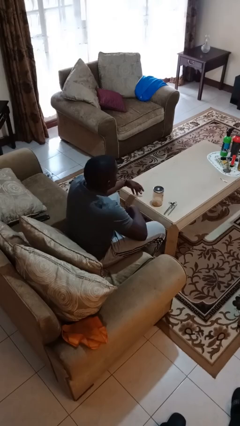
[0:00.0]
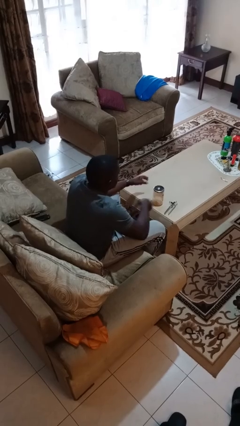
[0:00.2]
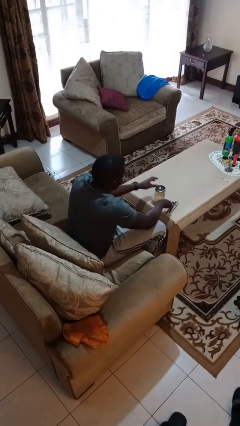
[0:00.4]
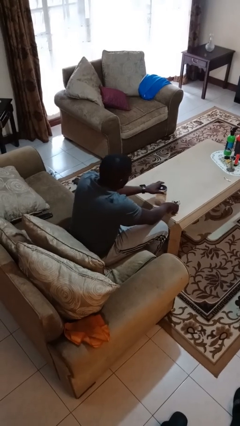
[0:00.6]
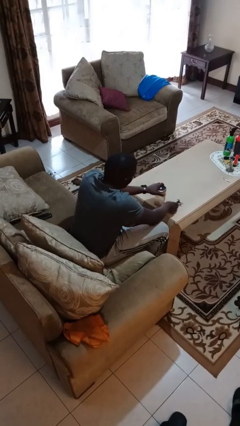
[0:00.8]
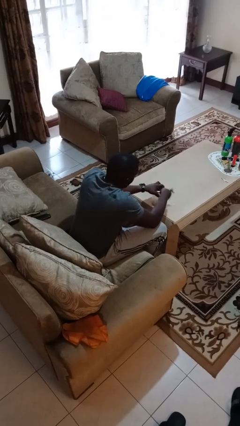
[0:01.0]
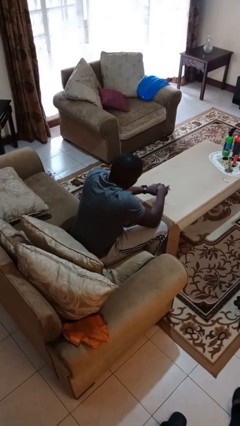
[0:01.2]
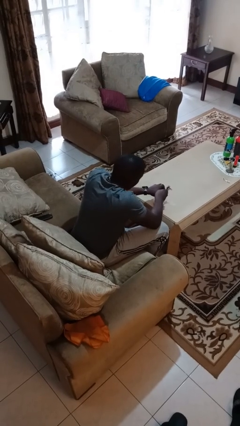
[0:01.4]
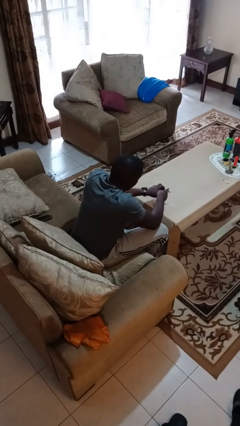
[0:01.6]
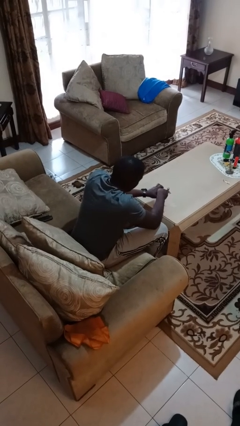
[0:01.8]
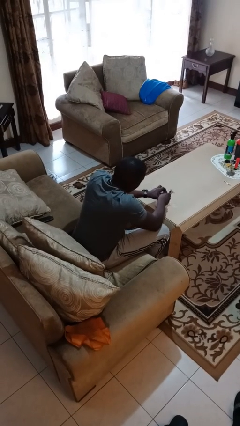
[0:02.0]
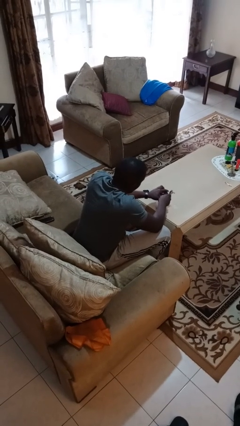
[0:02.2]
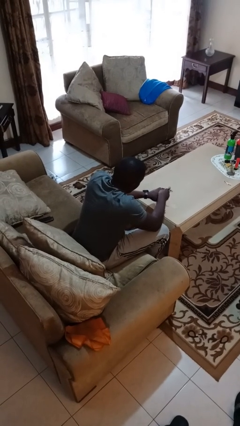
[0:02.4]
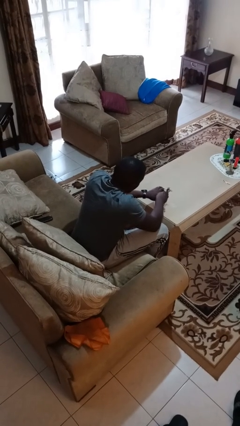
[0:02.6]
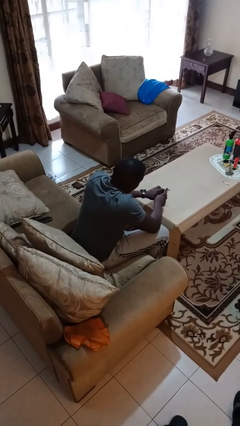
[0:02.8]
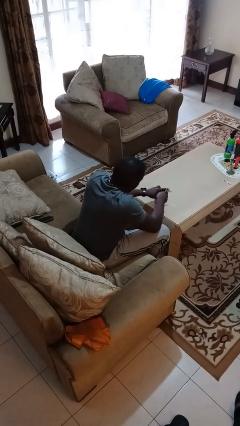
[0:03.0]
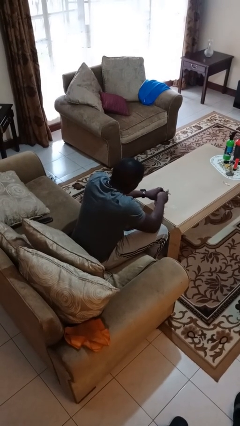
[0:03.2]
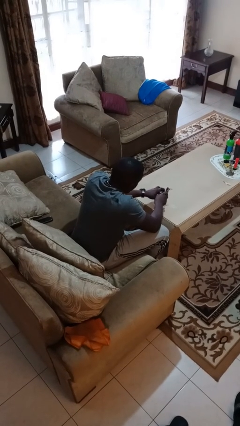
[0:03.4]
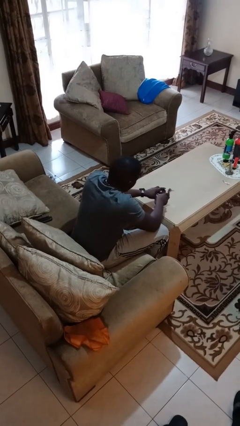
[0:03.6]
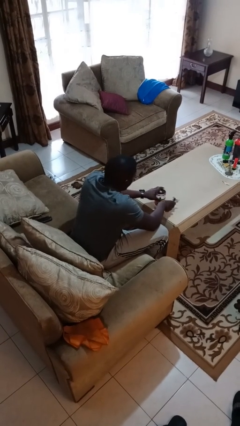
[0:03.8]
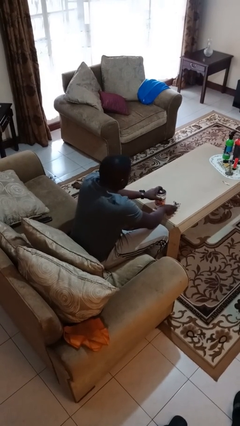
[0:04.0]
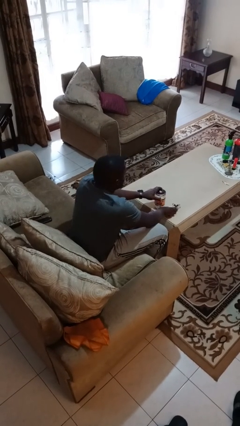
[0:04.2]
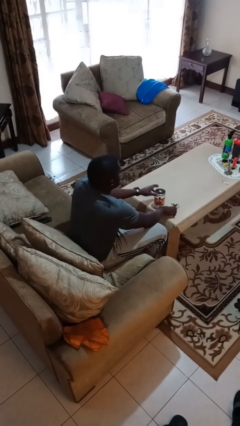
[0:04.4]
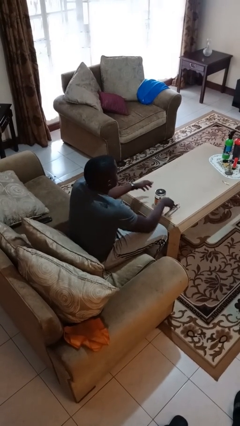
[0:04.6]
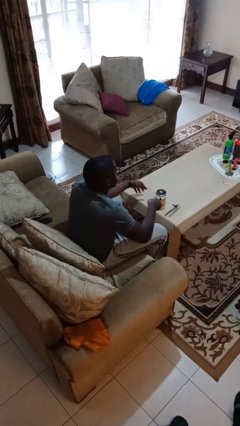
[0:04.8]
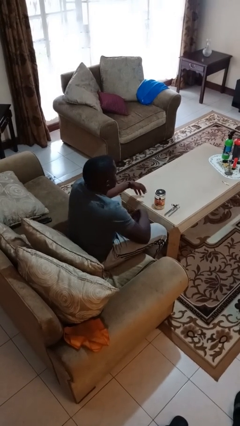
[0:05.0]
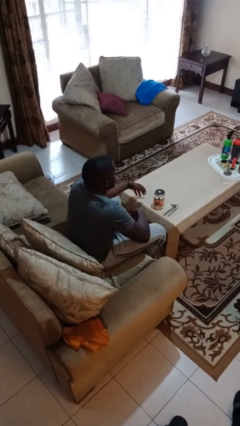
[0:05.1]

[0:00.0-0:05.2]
person opens can with can opener

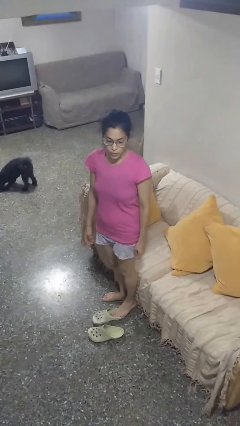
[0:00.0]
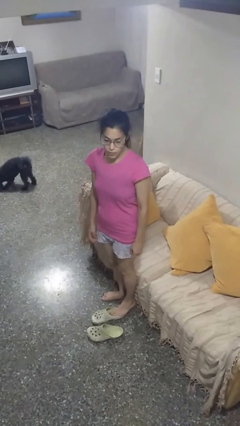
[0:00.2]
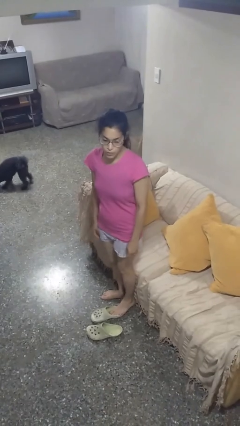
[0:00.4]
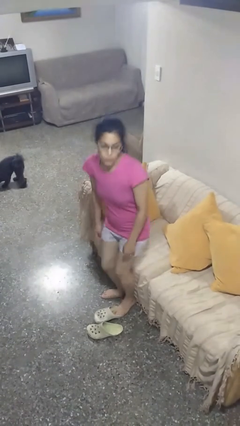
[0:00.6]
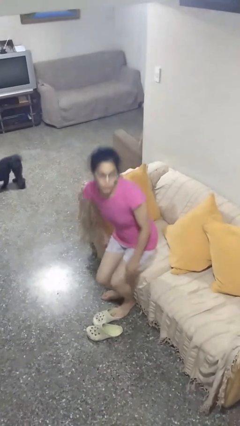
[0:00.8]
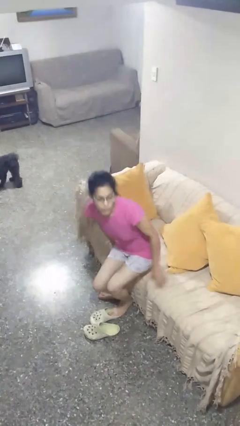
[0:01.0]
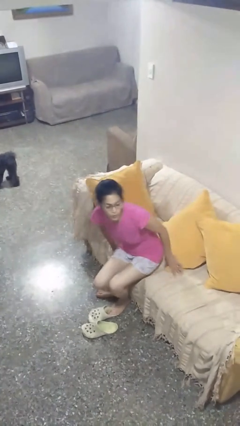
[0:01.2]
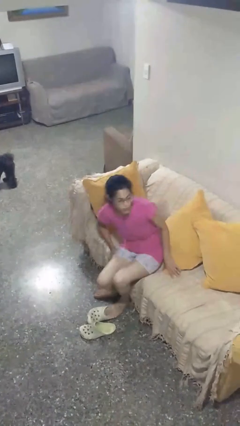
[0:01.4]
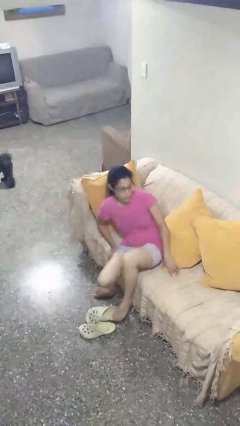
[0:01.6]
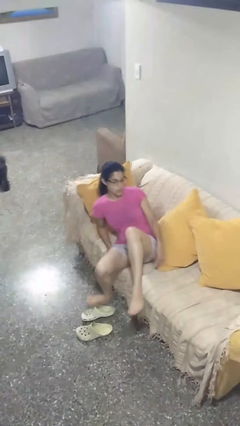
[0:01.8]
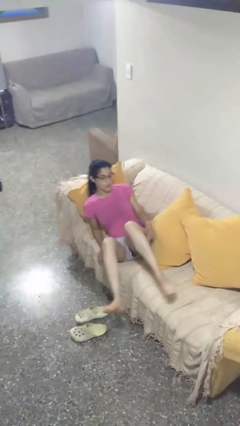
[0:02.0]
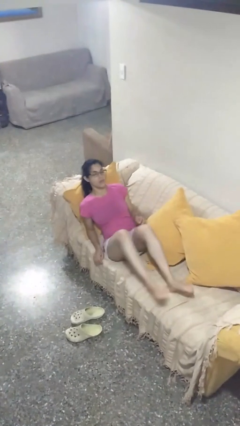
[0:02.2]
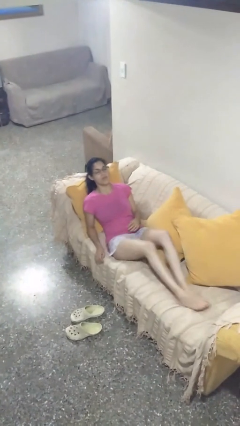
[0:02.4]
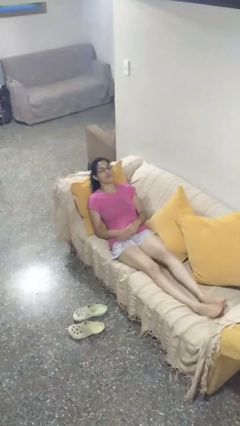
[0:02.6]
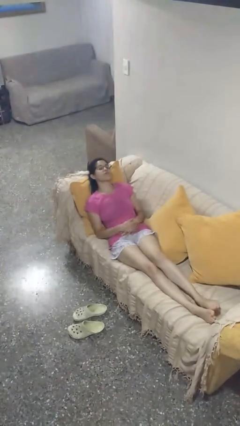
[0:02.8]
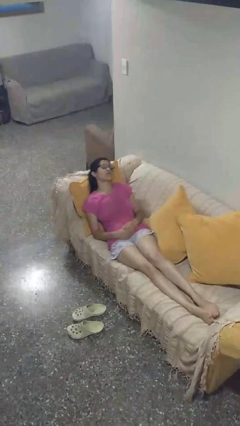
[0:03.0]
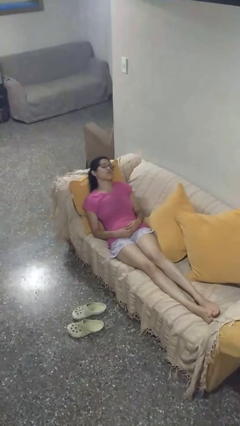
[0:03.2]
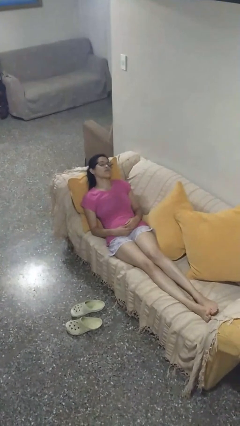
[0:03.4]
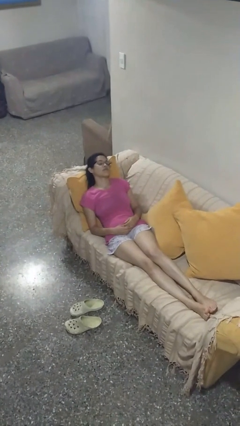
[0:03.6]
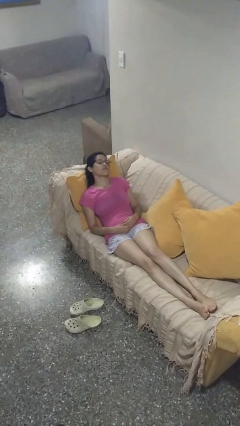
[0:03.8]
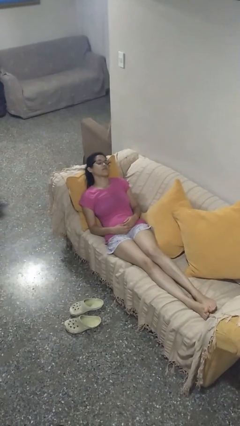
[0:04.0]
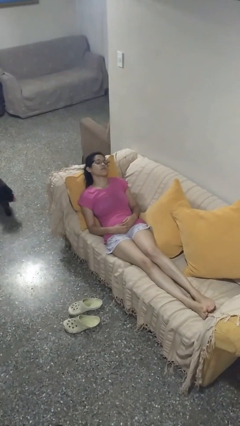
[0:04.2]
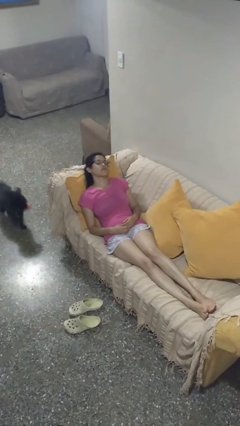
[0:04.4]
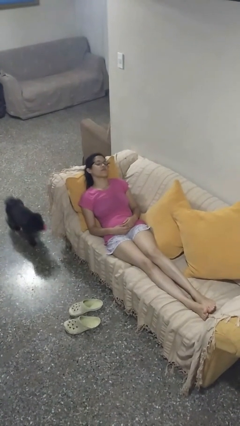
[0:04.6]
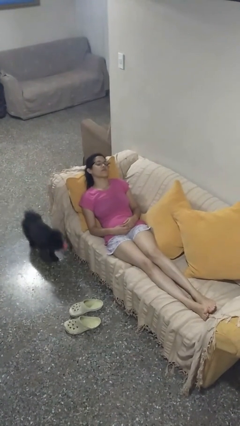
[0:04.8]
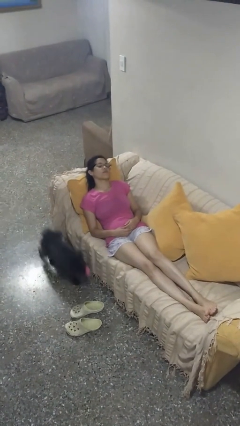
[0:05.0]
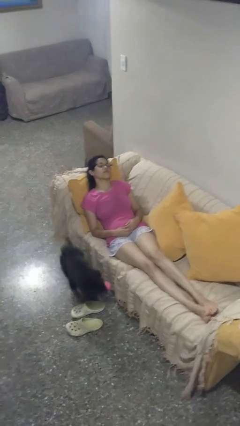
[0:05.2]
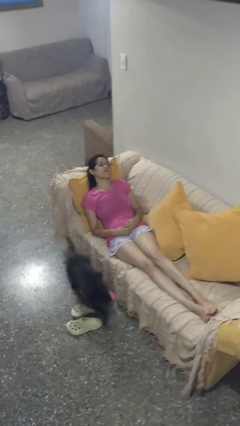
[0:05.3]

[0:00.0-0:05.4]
person lies down on couch

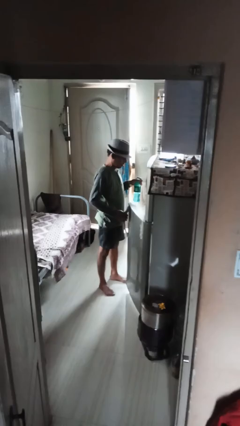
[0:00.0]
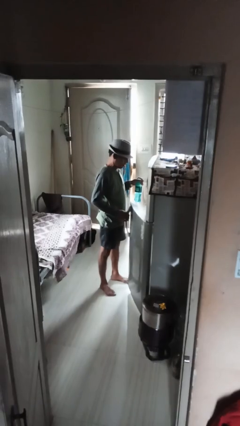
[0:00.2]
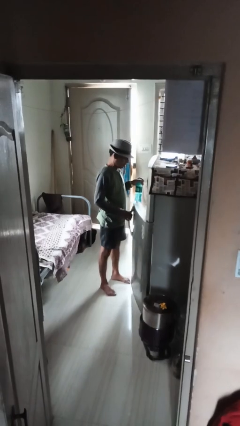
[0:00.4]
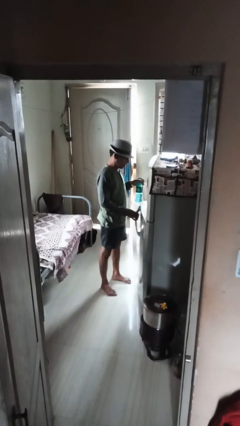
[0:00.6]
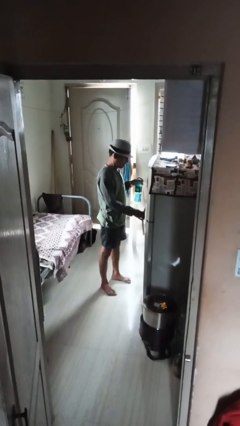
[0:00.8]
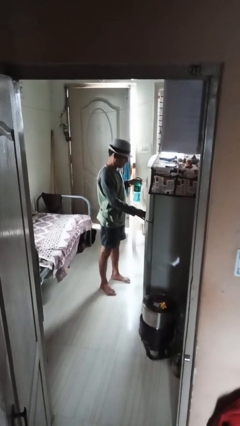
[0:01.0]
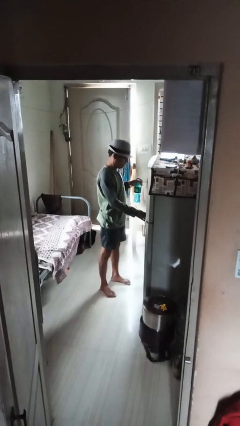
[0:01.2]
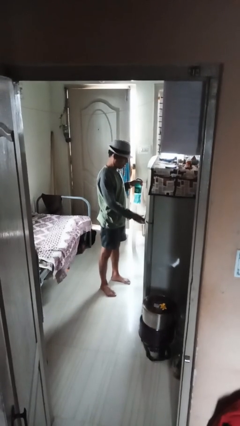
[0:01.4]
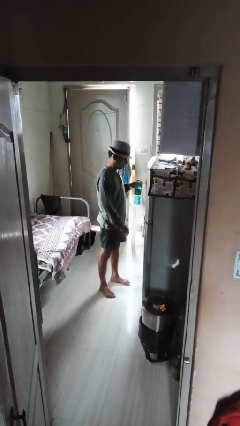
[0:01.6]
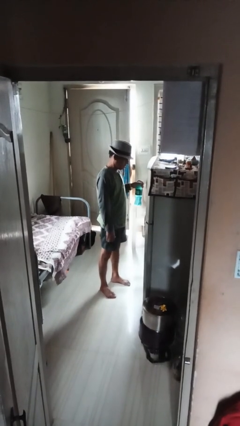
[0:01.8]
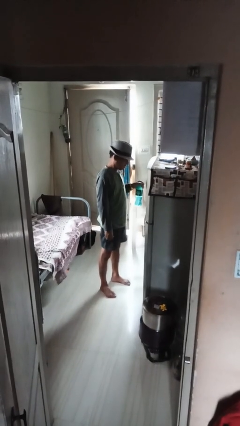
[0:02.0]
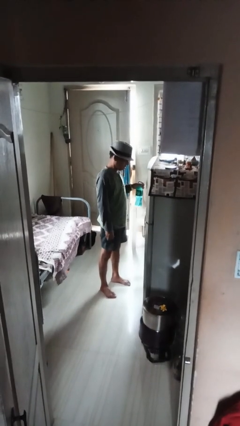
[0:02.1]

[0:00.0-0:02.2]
person closes refrigerator

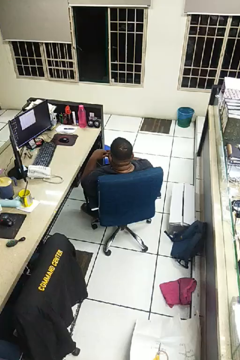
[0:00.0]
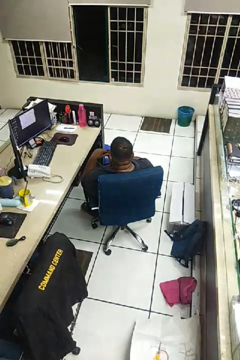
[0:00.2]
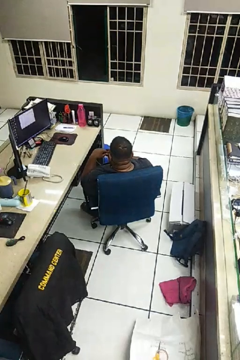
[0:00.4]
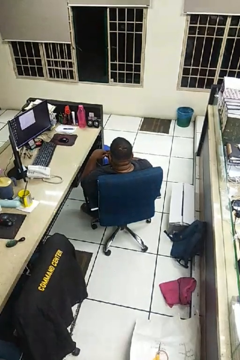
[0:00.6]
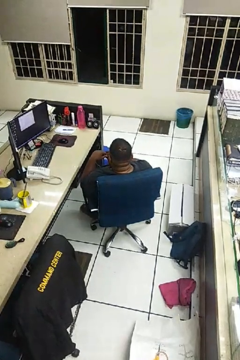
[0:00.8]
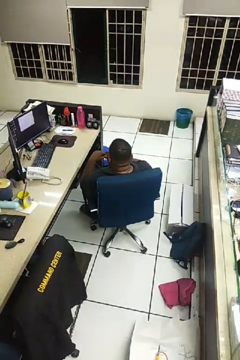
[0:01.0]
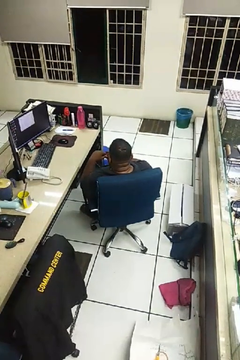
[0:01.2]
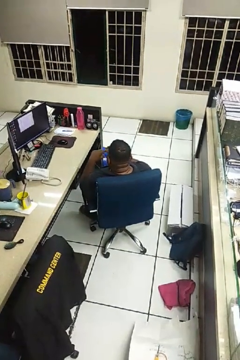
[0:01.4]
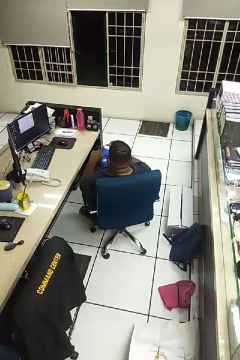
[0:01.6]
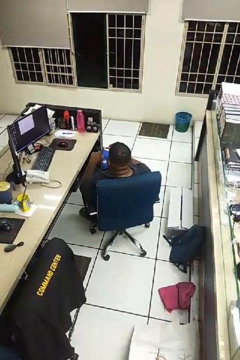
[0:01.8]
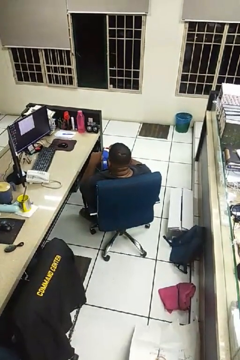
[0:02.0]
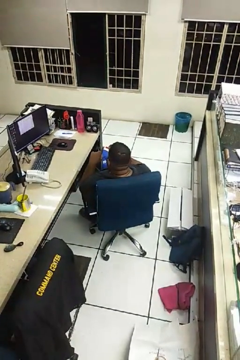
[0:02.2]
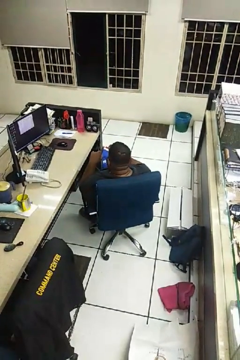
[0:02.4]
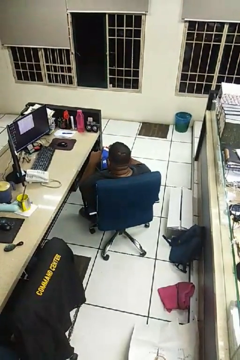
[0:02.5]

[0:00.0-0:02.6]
person paints fingernails

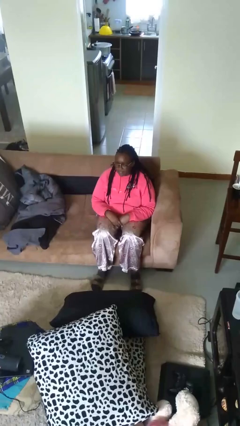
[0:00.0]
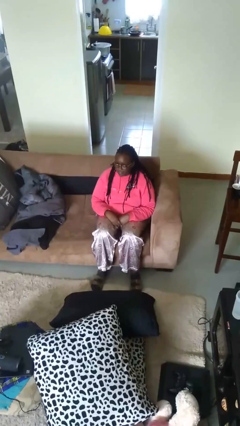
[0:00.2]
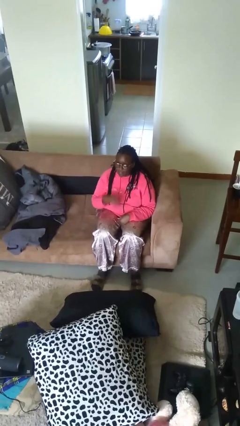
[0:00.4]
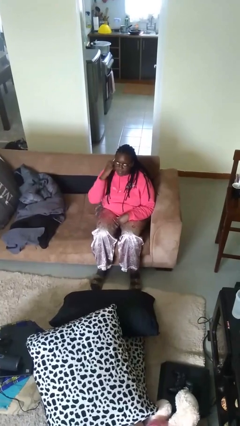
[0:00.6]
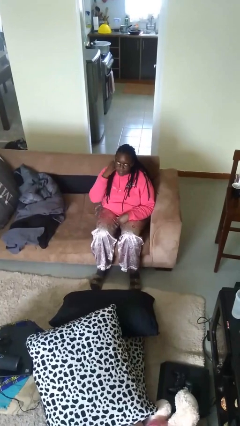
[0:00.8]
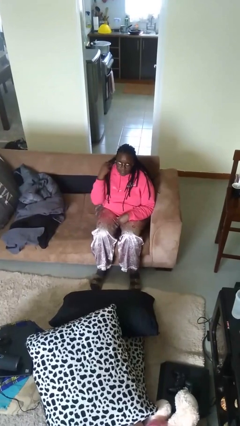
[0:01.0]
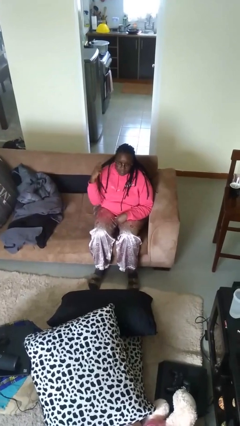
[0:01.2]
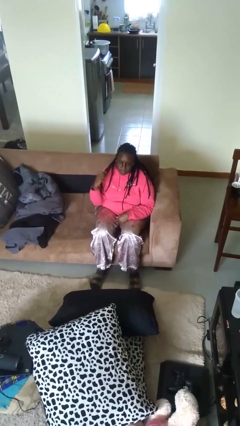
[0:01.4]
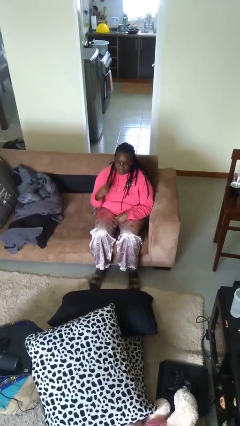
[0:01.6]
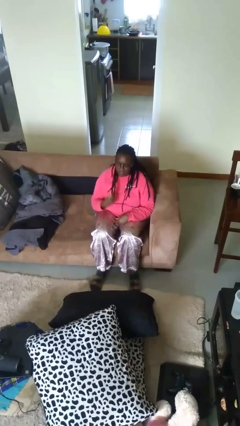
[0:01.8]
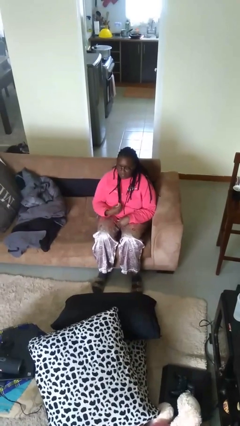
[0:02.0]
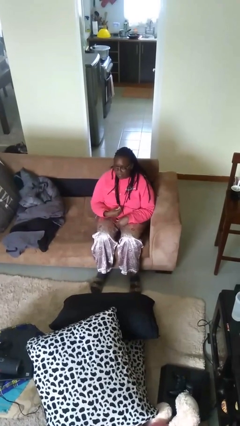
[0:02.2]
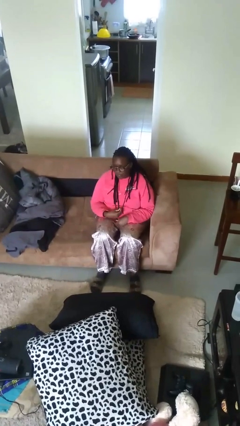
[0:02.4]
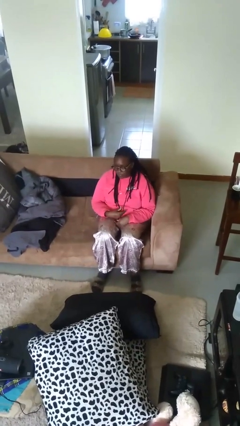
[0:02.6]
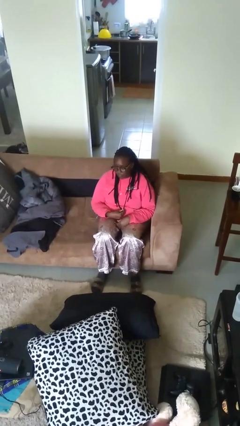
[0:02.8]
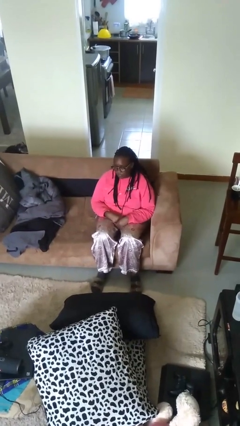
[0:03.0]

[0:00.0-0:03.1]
person strokes hair
